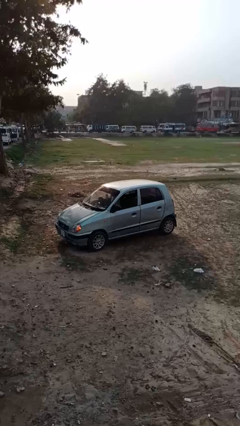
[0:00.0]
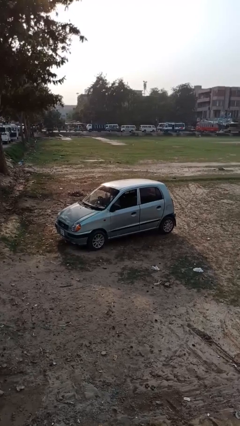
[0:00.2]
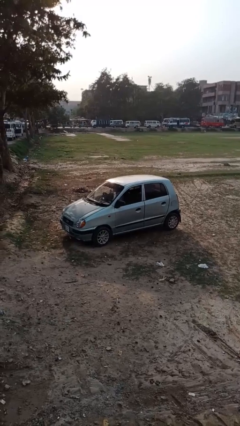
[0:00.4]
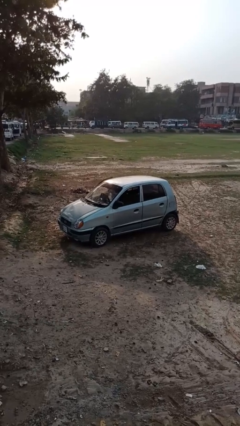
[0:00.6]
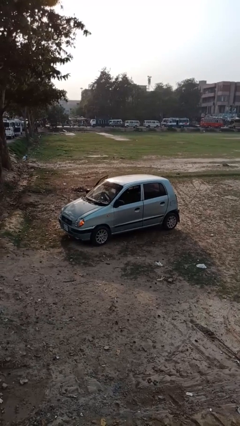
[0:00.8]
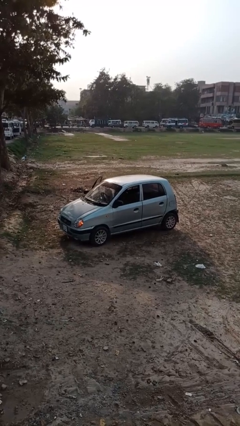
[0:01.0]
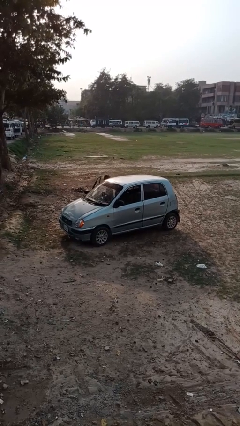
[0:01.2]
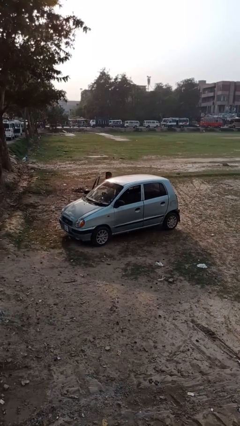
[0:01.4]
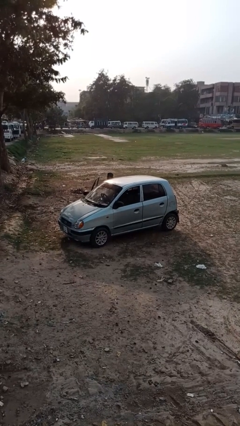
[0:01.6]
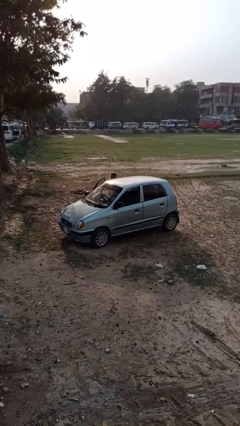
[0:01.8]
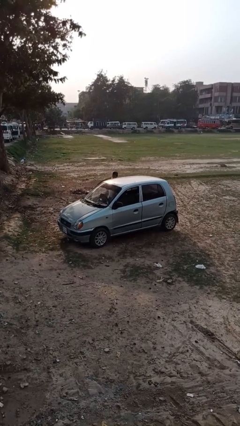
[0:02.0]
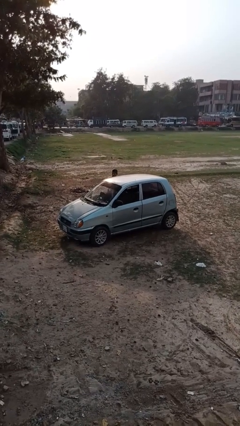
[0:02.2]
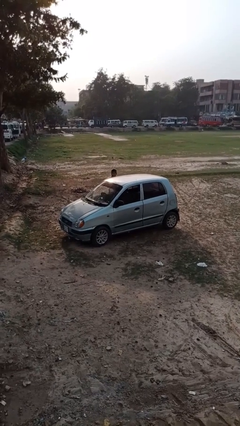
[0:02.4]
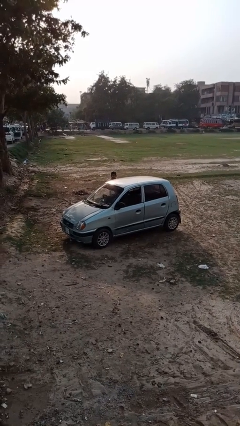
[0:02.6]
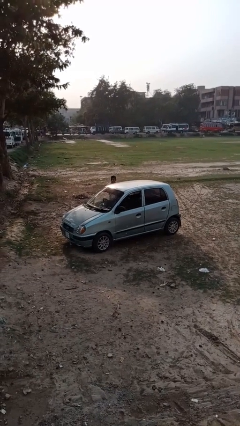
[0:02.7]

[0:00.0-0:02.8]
car drops off person

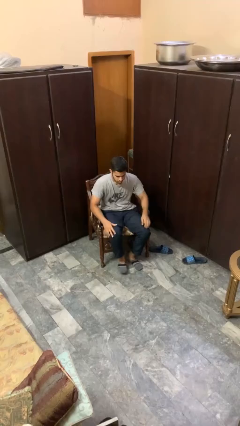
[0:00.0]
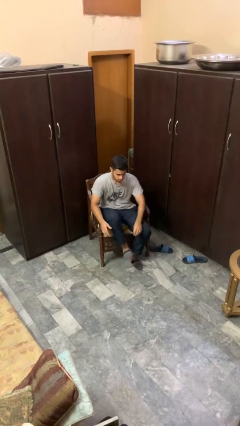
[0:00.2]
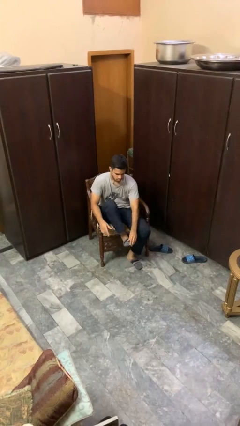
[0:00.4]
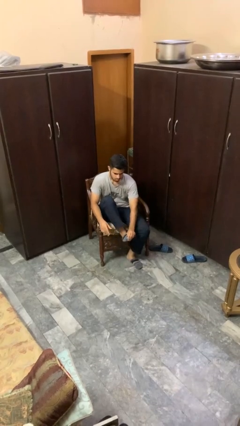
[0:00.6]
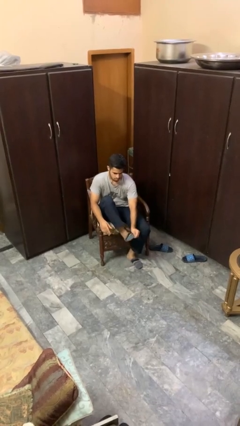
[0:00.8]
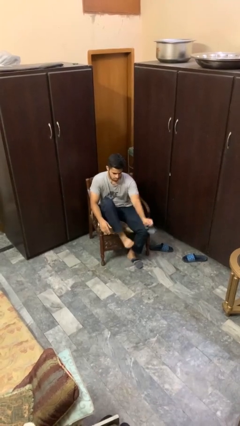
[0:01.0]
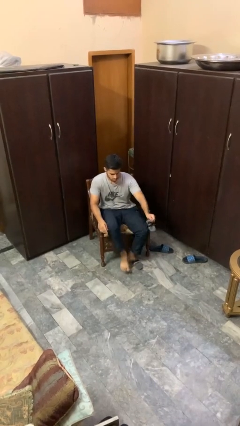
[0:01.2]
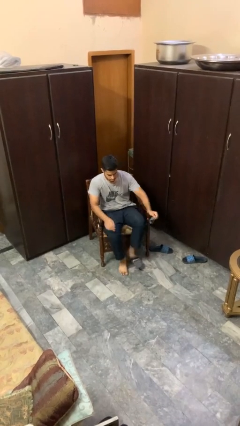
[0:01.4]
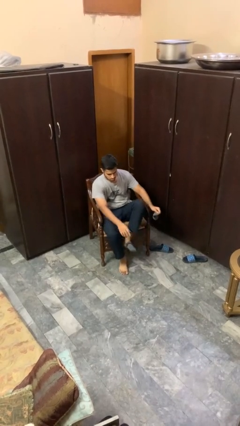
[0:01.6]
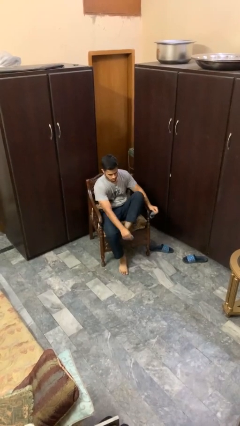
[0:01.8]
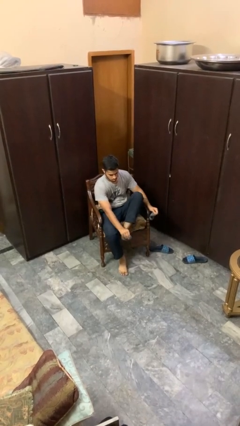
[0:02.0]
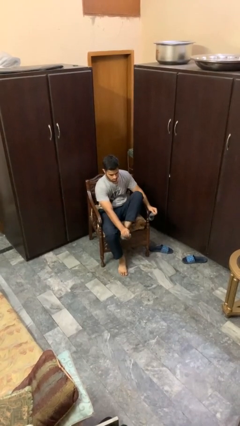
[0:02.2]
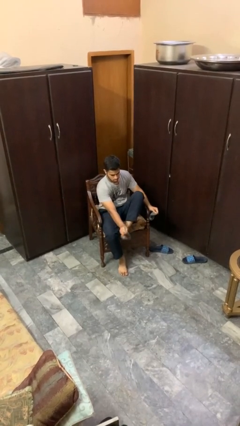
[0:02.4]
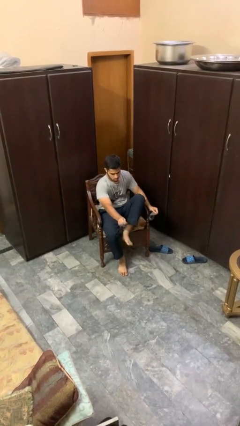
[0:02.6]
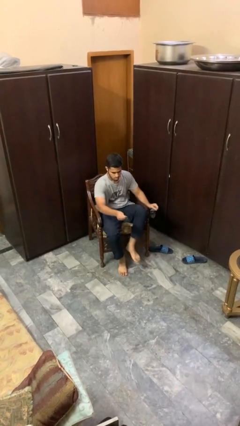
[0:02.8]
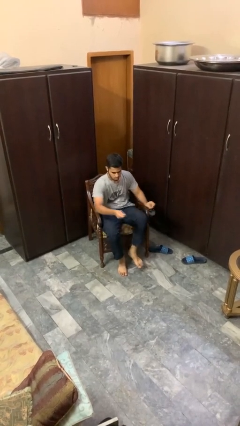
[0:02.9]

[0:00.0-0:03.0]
person takes off socks

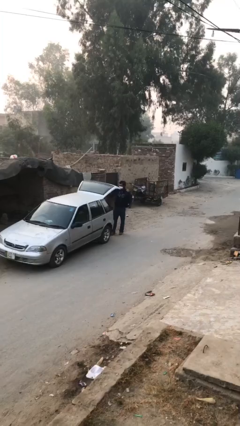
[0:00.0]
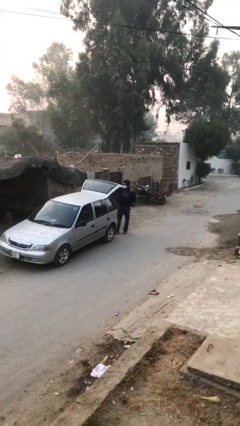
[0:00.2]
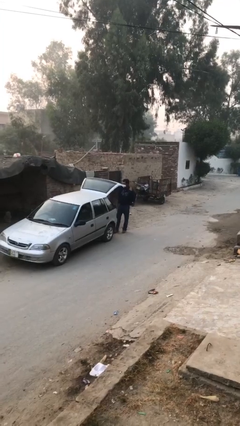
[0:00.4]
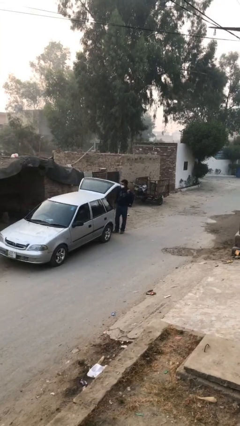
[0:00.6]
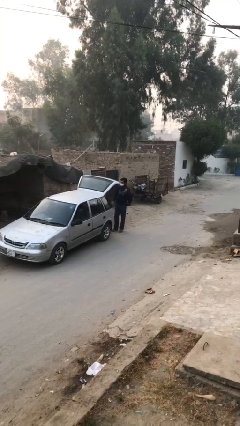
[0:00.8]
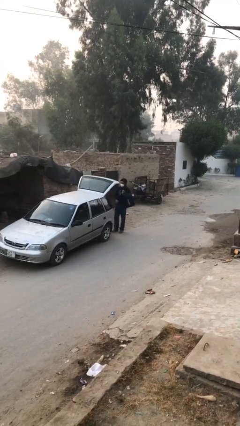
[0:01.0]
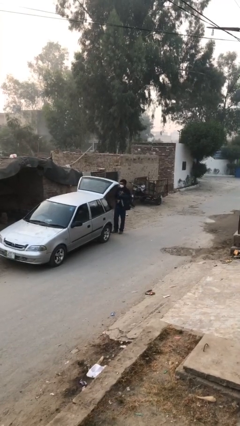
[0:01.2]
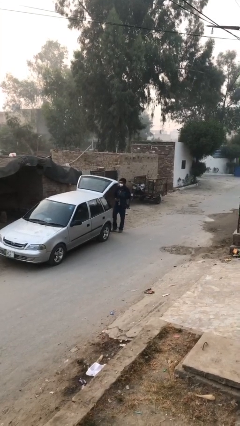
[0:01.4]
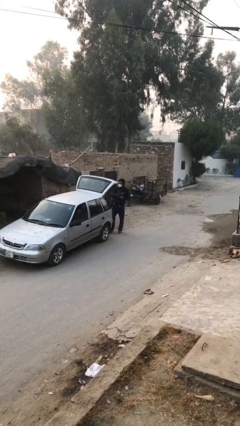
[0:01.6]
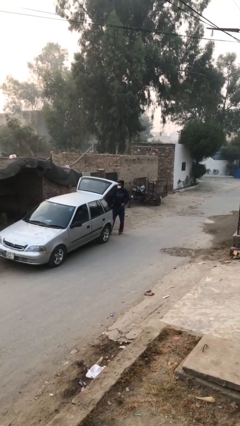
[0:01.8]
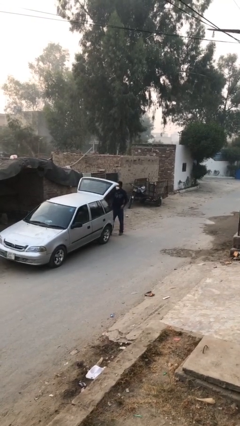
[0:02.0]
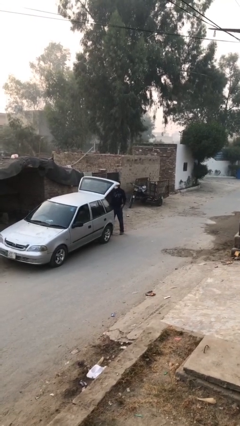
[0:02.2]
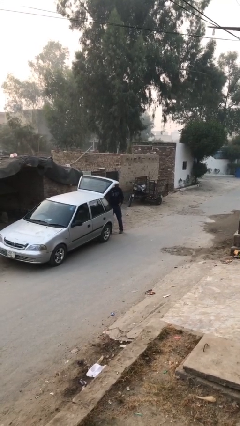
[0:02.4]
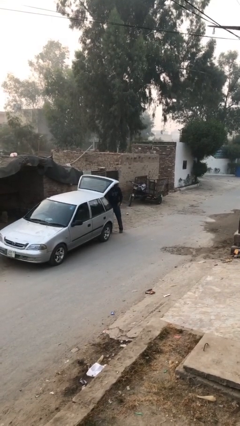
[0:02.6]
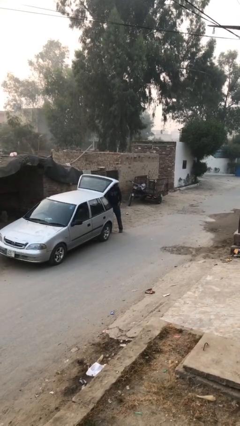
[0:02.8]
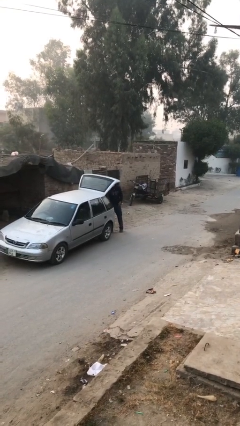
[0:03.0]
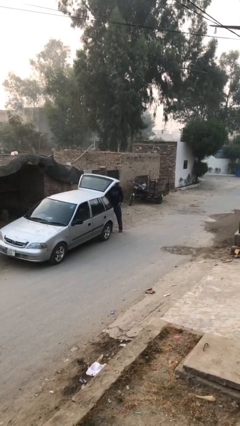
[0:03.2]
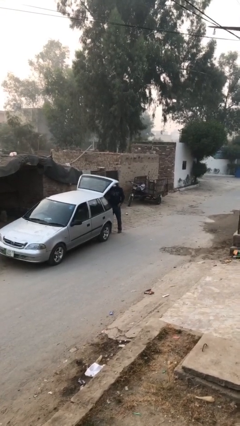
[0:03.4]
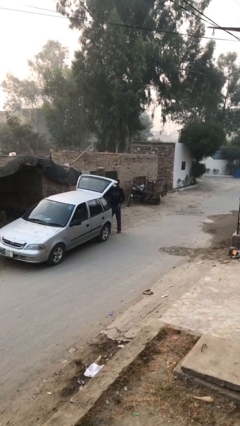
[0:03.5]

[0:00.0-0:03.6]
person loads car

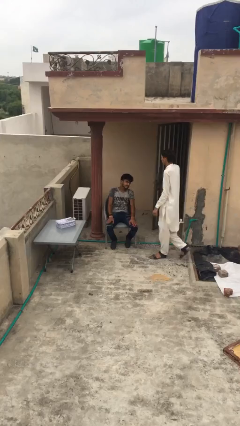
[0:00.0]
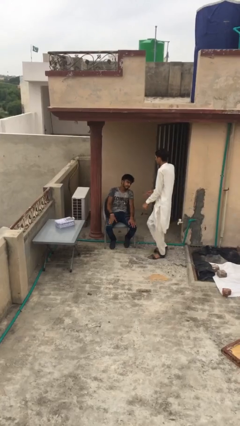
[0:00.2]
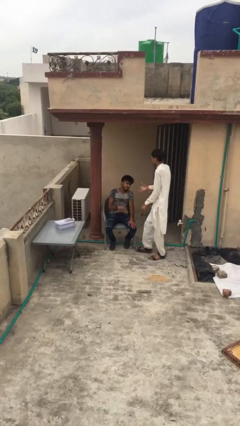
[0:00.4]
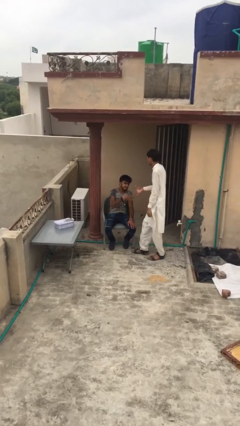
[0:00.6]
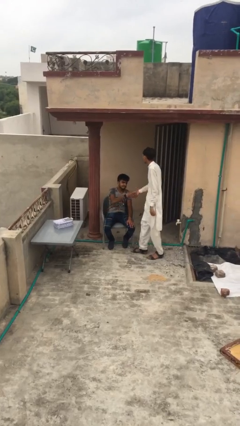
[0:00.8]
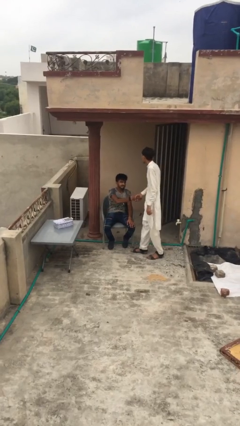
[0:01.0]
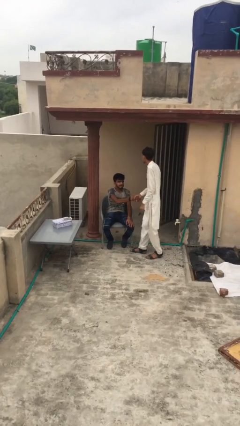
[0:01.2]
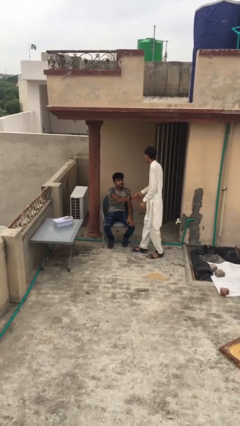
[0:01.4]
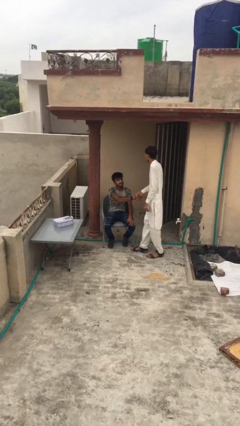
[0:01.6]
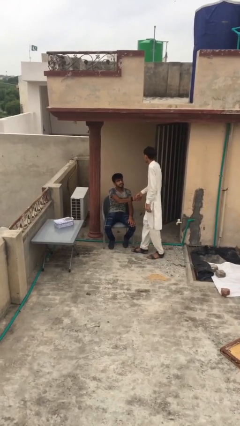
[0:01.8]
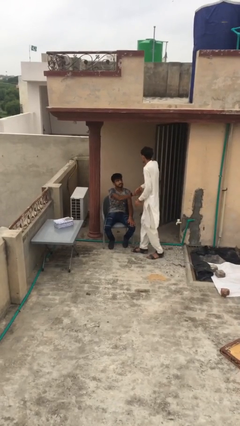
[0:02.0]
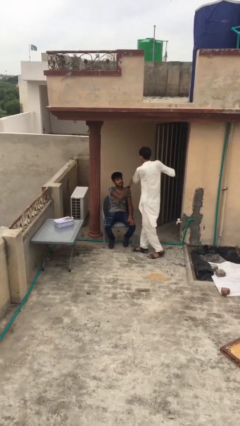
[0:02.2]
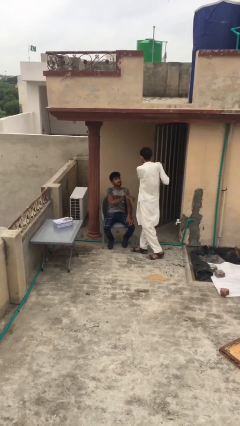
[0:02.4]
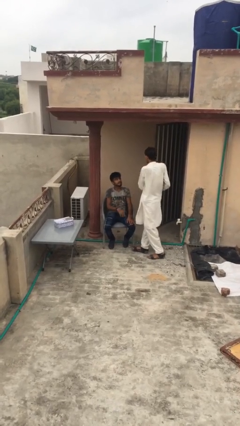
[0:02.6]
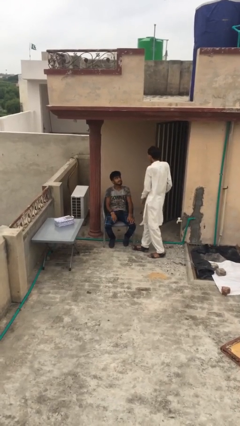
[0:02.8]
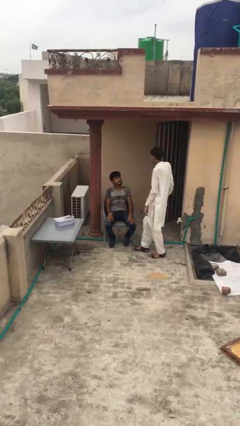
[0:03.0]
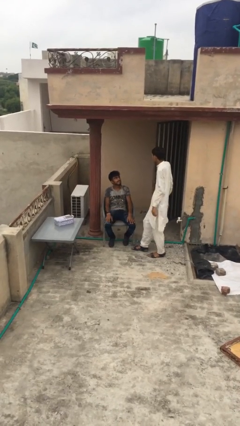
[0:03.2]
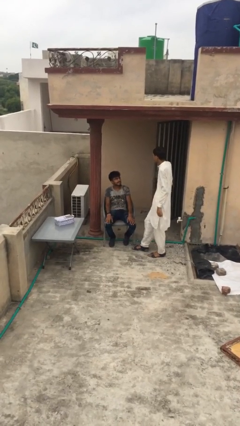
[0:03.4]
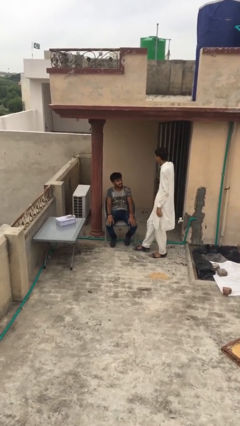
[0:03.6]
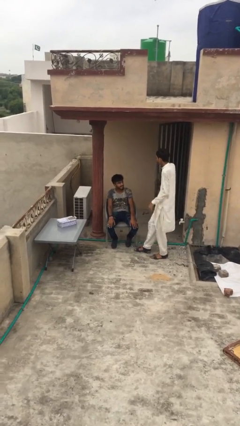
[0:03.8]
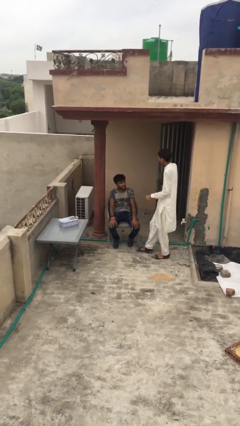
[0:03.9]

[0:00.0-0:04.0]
person shakes hand

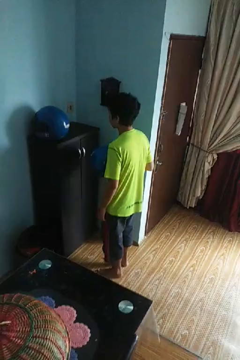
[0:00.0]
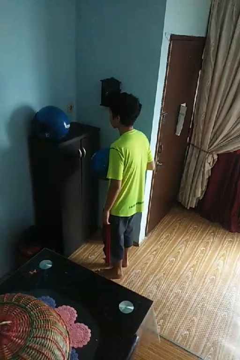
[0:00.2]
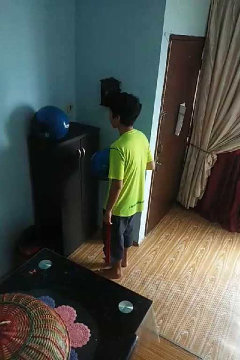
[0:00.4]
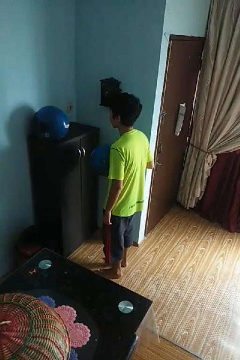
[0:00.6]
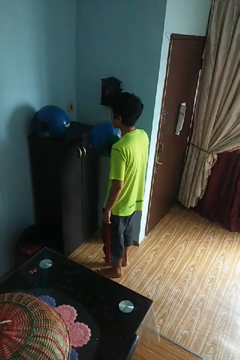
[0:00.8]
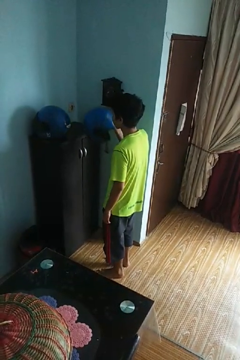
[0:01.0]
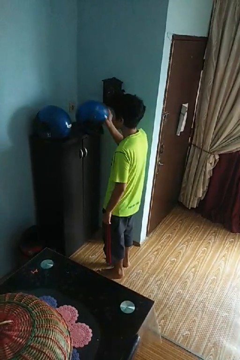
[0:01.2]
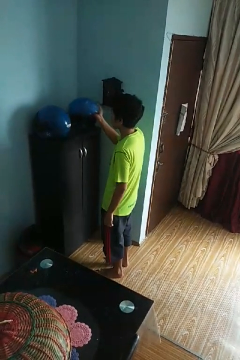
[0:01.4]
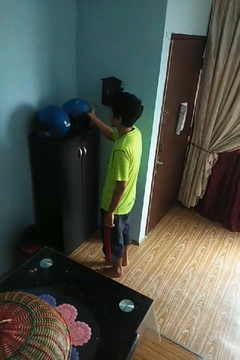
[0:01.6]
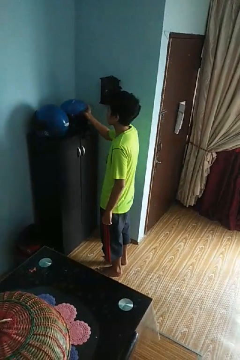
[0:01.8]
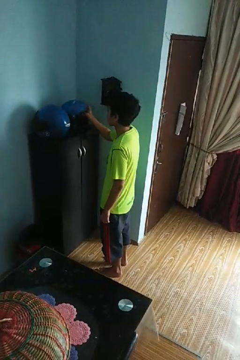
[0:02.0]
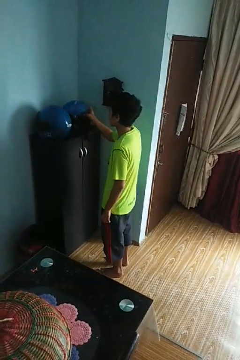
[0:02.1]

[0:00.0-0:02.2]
person puts down object on countertop

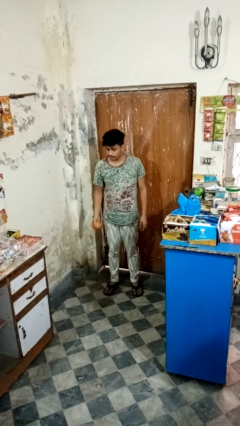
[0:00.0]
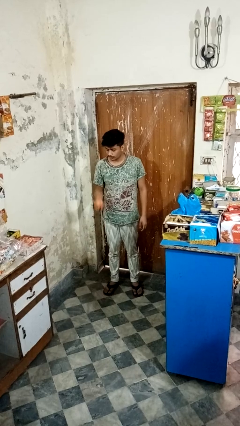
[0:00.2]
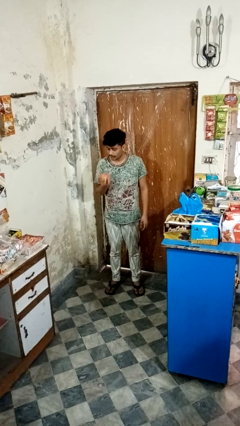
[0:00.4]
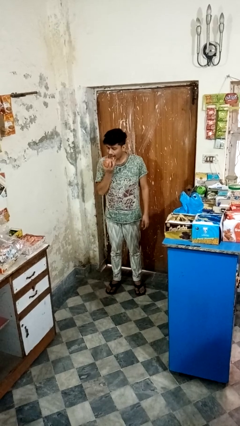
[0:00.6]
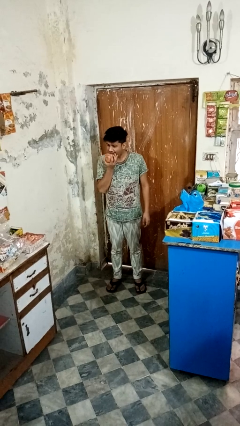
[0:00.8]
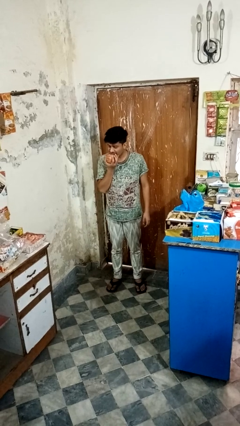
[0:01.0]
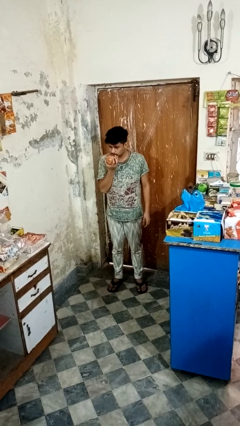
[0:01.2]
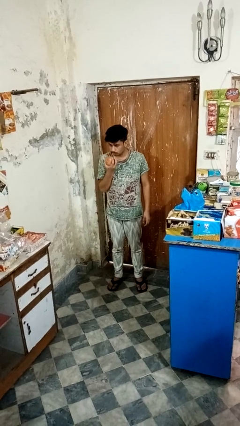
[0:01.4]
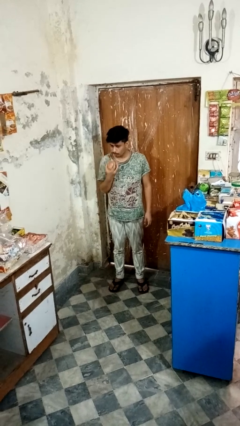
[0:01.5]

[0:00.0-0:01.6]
person eats apple

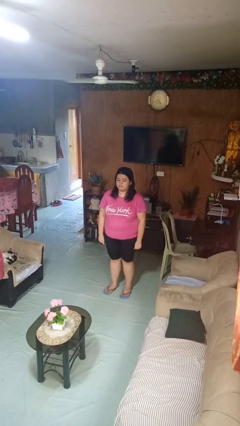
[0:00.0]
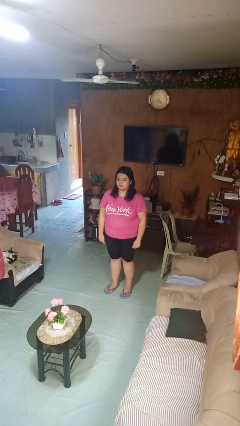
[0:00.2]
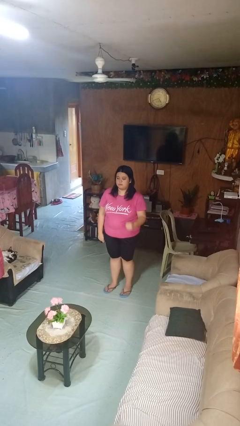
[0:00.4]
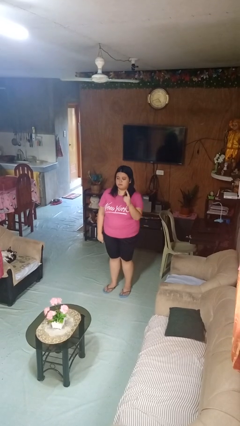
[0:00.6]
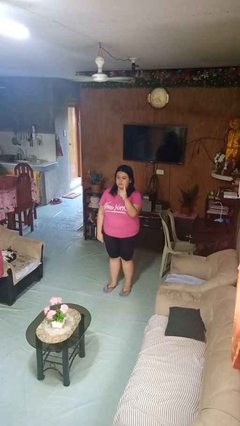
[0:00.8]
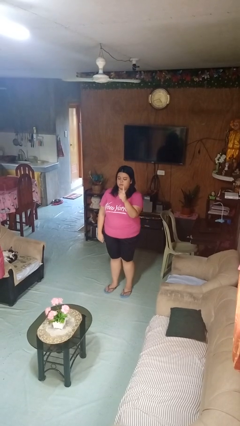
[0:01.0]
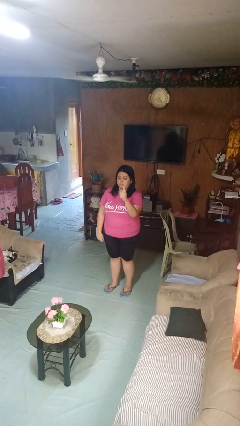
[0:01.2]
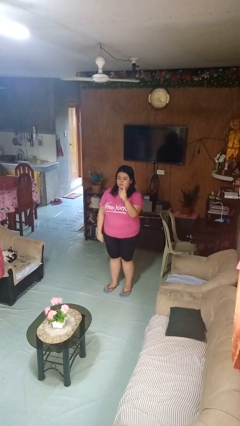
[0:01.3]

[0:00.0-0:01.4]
person gestures number one
